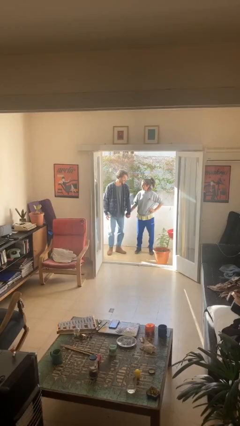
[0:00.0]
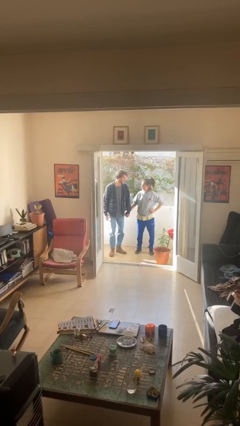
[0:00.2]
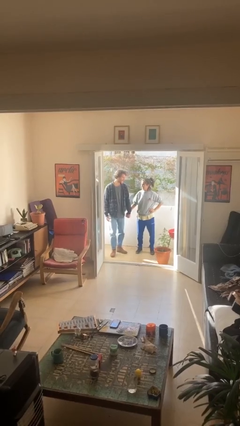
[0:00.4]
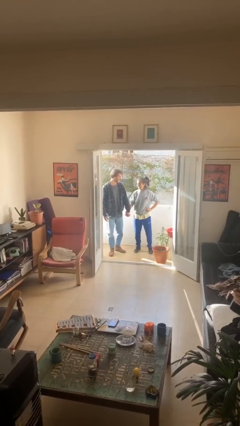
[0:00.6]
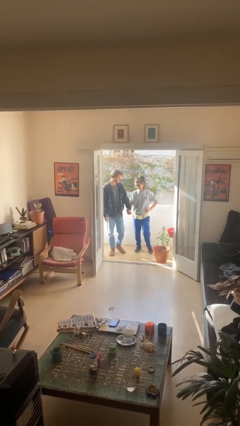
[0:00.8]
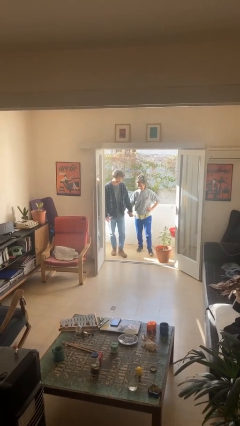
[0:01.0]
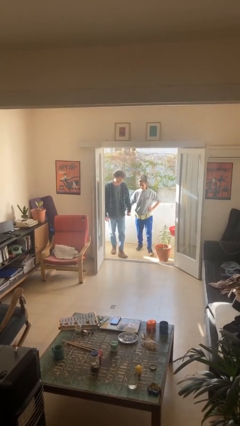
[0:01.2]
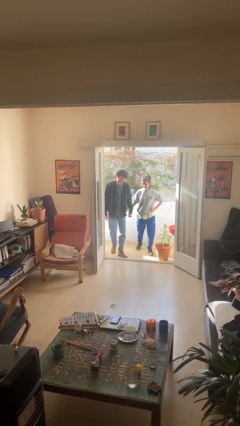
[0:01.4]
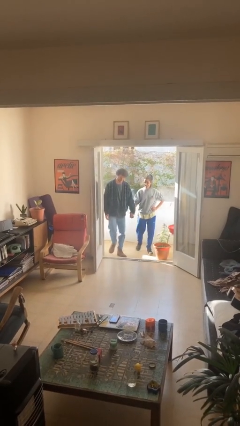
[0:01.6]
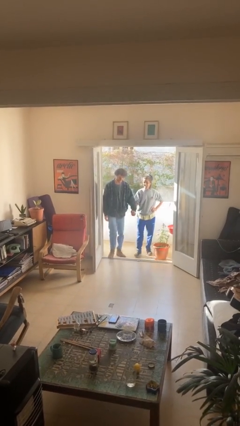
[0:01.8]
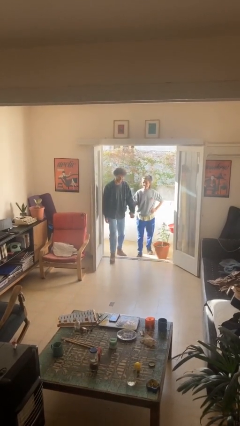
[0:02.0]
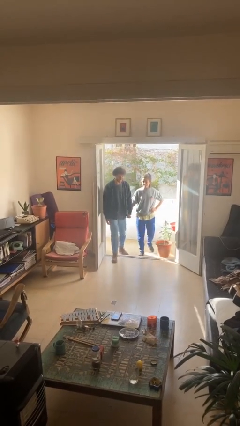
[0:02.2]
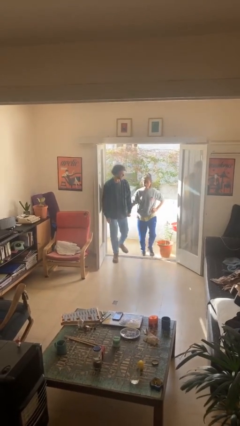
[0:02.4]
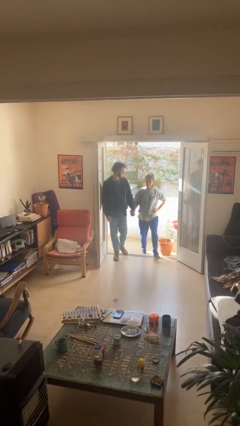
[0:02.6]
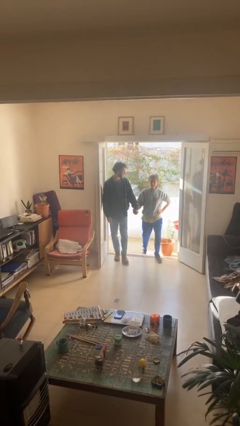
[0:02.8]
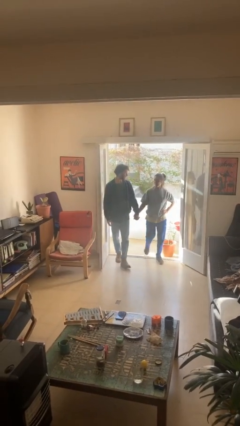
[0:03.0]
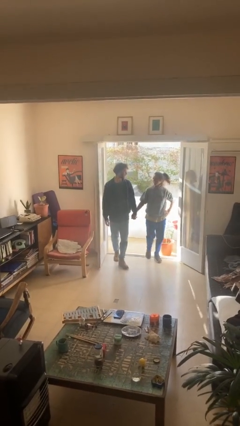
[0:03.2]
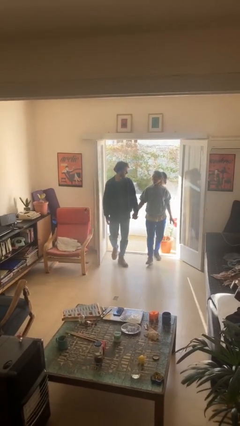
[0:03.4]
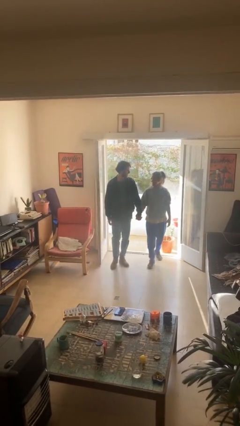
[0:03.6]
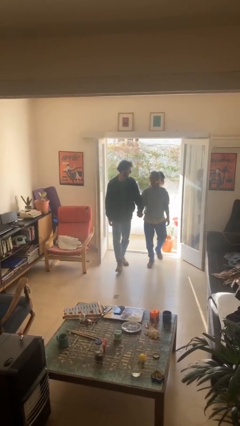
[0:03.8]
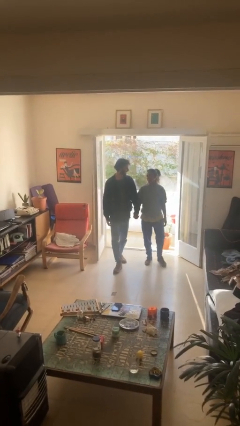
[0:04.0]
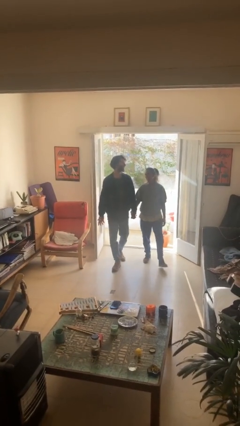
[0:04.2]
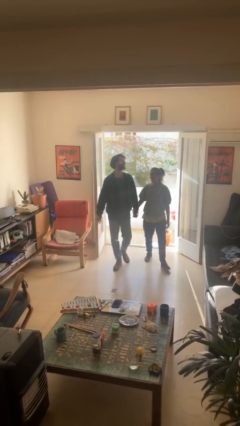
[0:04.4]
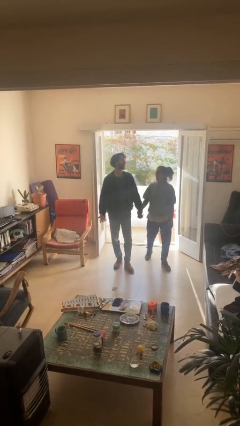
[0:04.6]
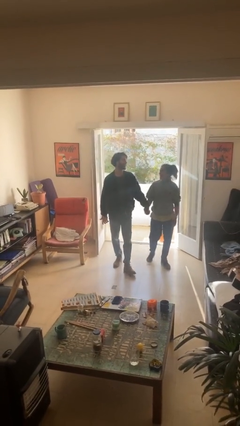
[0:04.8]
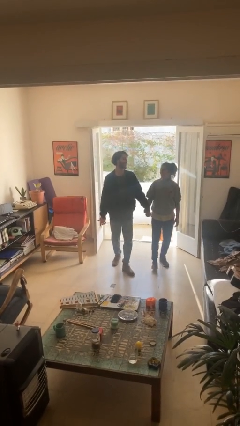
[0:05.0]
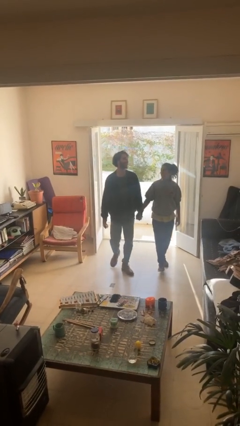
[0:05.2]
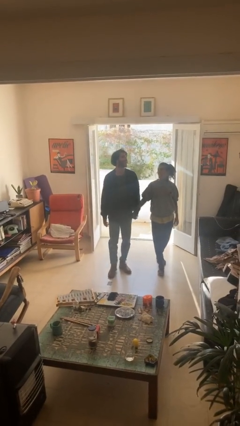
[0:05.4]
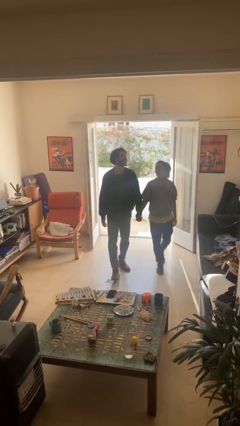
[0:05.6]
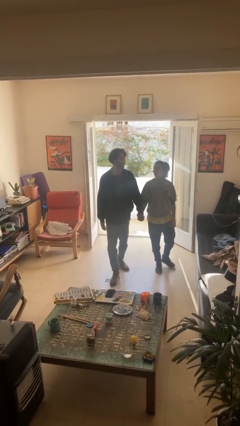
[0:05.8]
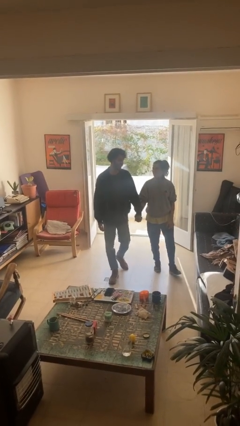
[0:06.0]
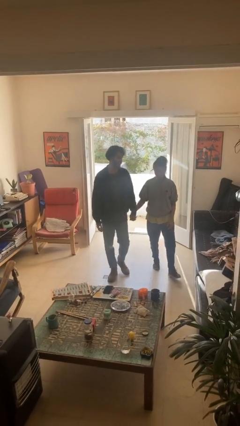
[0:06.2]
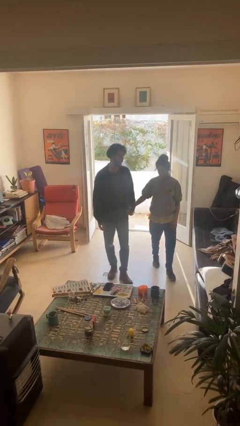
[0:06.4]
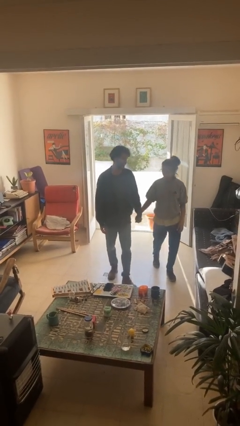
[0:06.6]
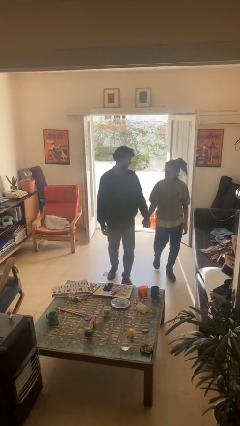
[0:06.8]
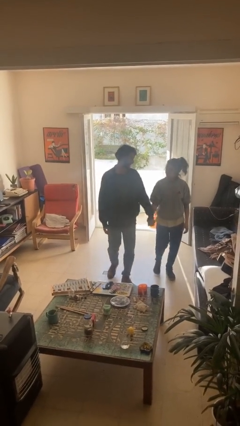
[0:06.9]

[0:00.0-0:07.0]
person holds hand

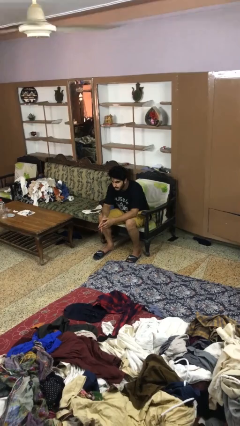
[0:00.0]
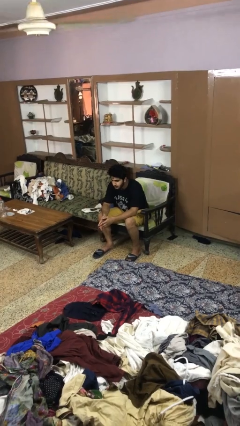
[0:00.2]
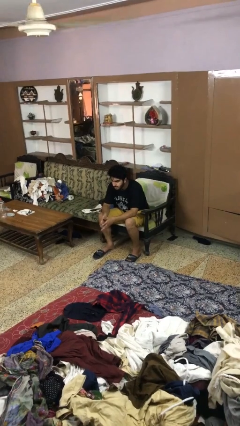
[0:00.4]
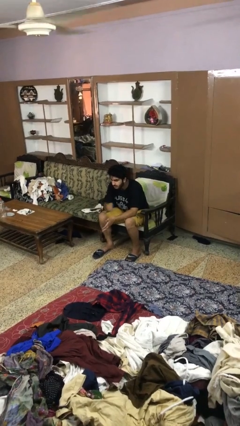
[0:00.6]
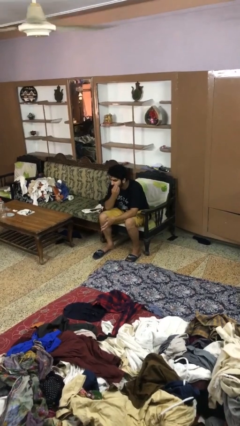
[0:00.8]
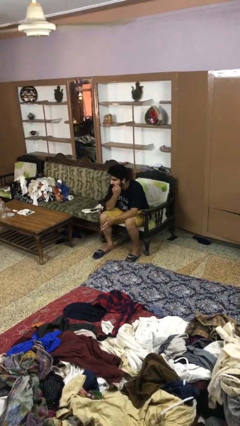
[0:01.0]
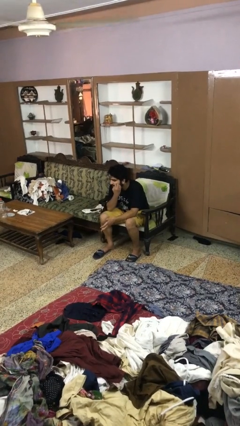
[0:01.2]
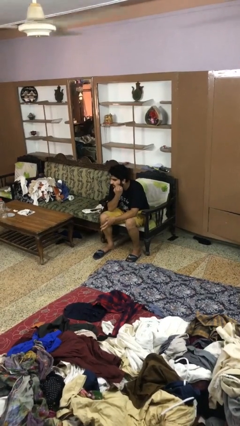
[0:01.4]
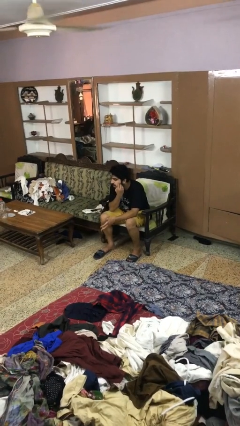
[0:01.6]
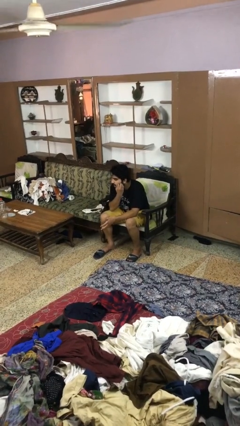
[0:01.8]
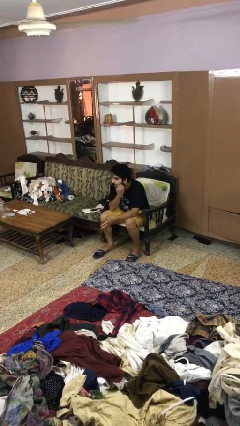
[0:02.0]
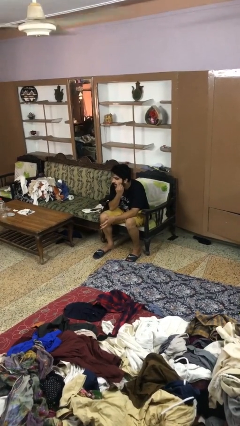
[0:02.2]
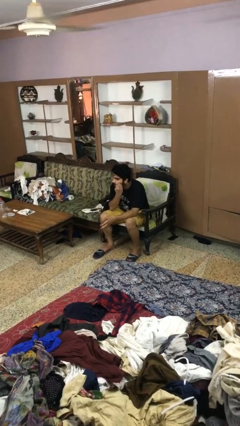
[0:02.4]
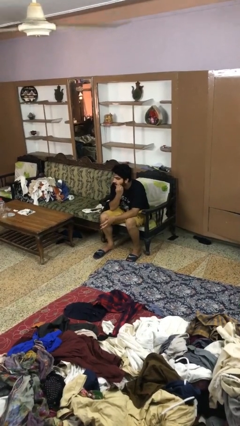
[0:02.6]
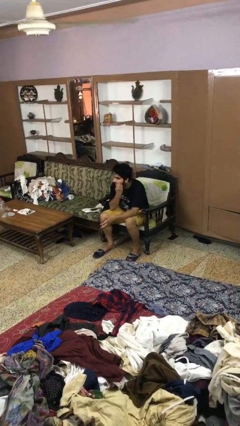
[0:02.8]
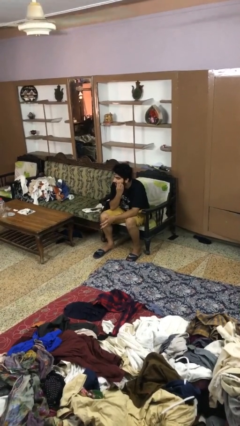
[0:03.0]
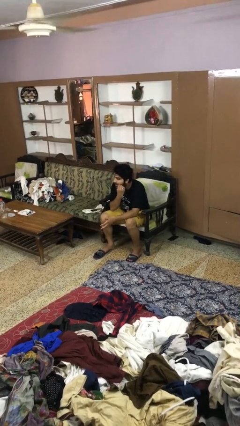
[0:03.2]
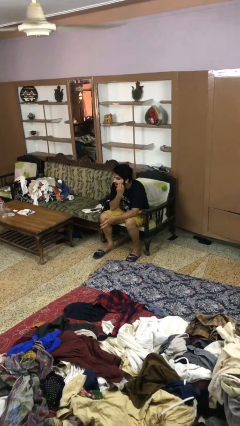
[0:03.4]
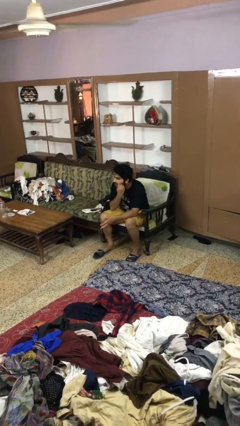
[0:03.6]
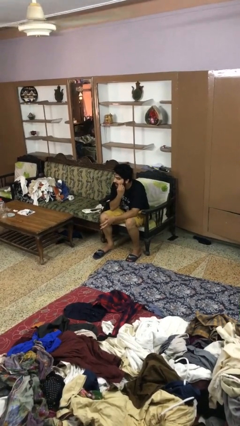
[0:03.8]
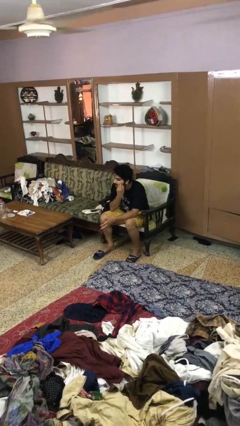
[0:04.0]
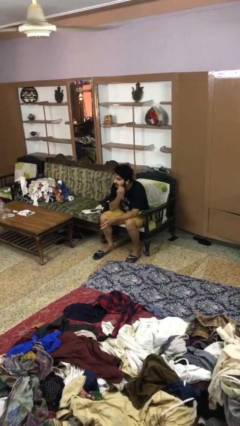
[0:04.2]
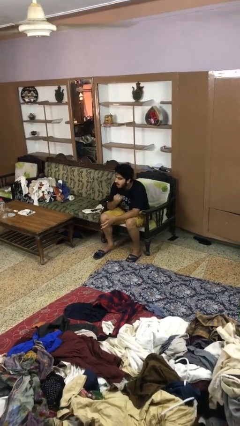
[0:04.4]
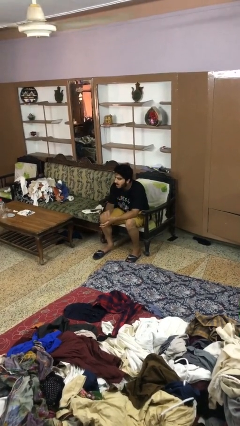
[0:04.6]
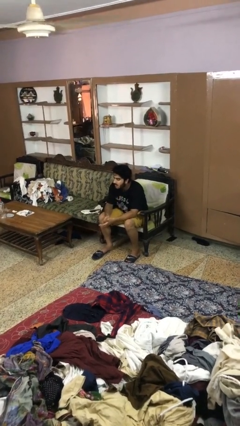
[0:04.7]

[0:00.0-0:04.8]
person scratches face

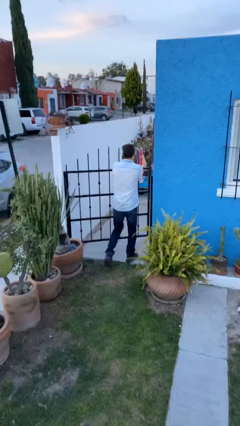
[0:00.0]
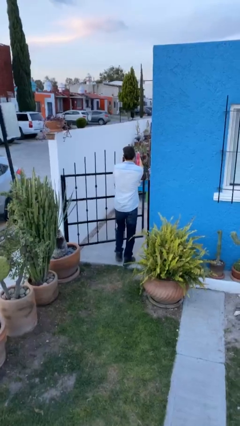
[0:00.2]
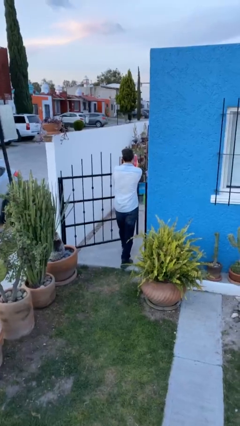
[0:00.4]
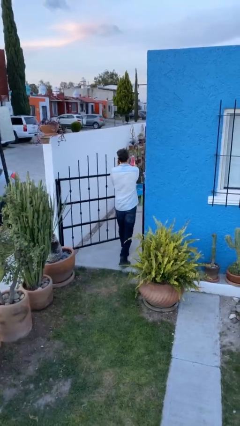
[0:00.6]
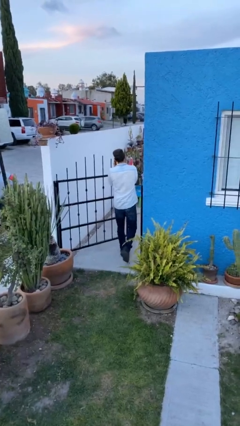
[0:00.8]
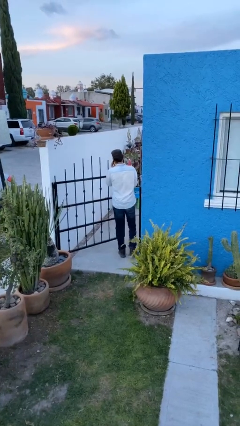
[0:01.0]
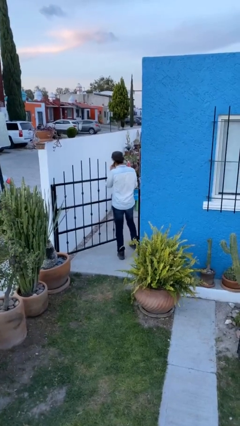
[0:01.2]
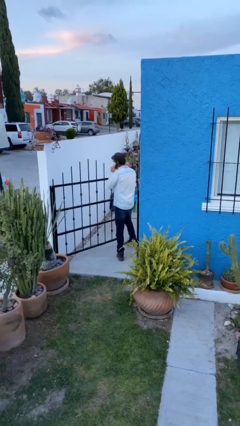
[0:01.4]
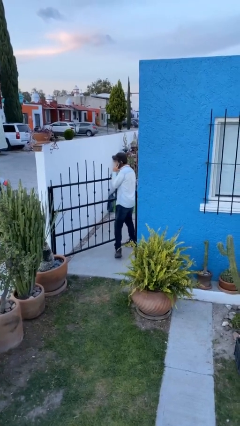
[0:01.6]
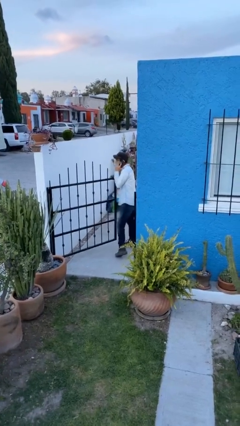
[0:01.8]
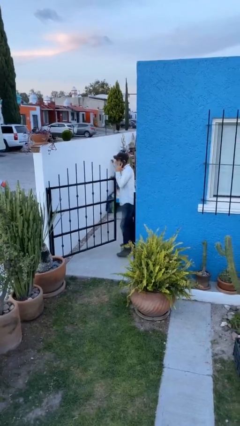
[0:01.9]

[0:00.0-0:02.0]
person exits scene through structure

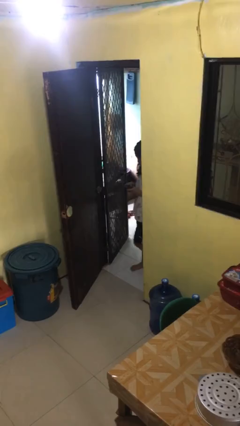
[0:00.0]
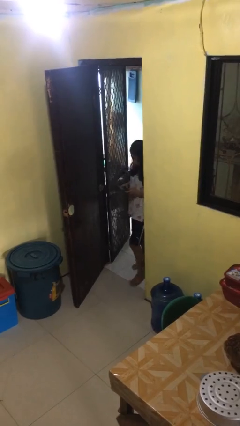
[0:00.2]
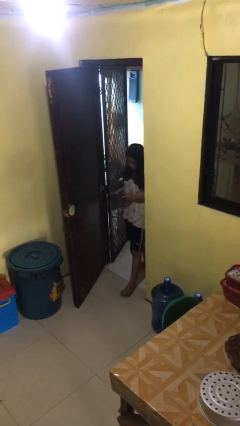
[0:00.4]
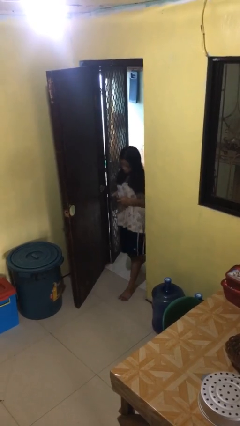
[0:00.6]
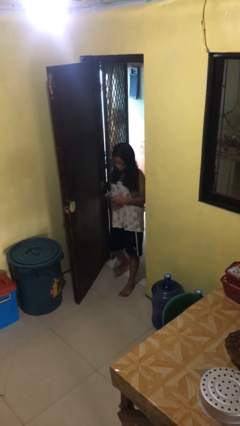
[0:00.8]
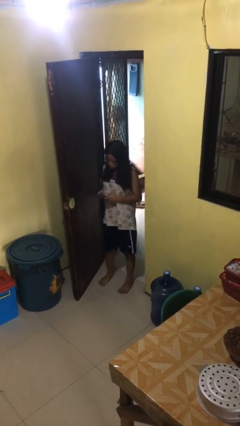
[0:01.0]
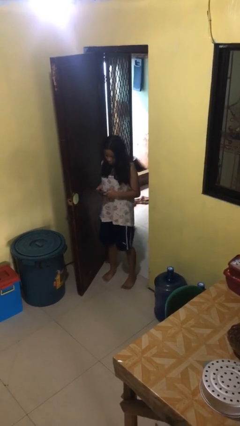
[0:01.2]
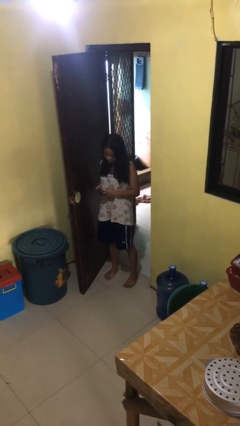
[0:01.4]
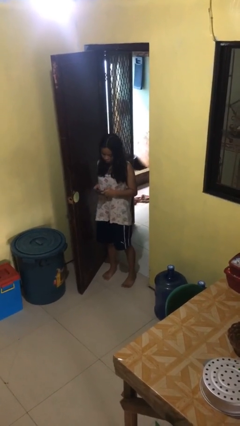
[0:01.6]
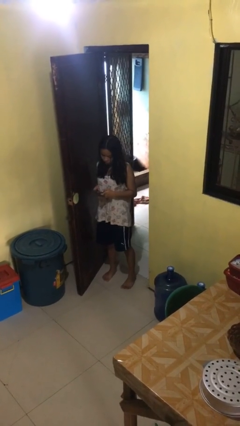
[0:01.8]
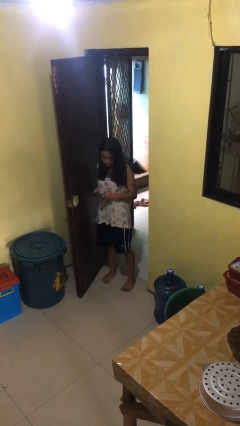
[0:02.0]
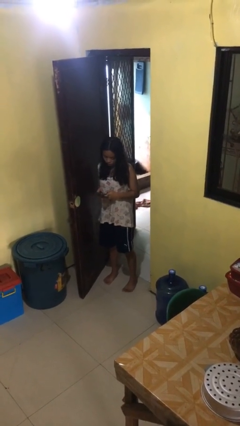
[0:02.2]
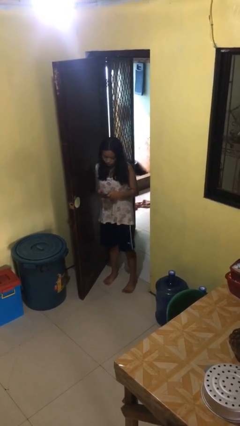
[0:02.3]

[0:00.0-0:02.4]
person enters scene through structure

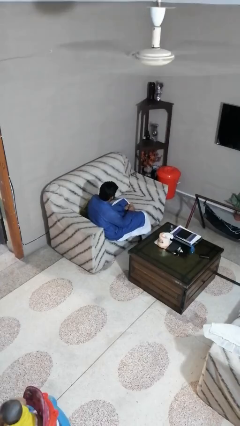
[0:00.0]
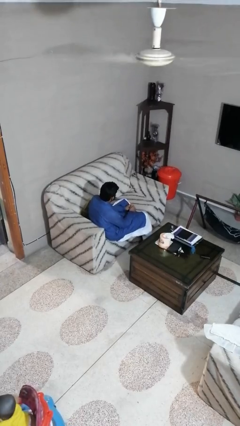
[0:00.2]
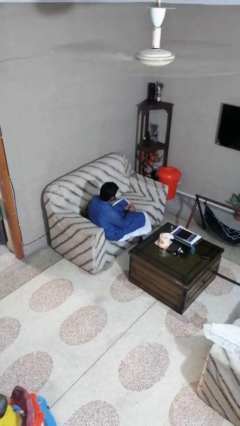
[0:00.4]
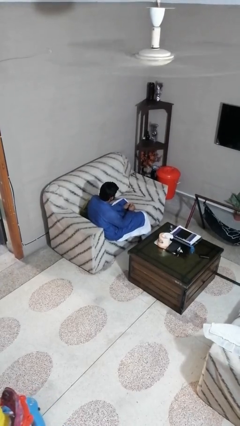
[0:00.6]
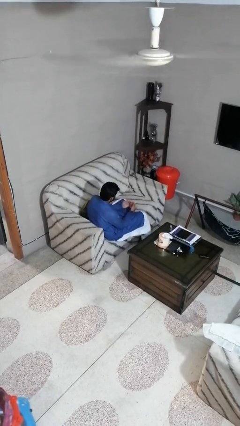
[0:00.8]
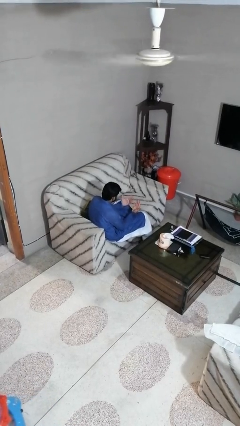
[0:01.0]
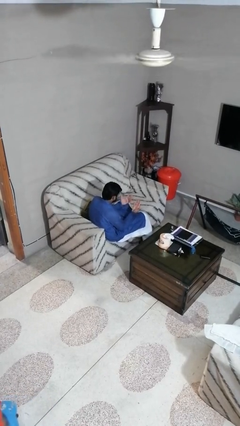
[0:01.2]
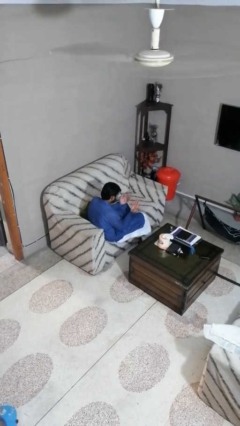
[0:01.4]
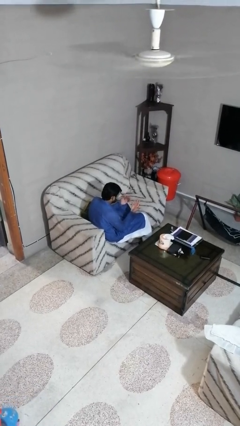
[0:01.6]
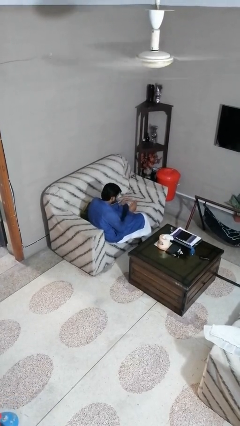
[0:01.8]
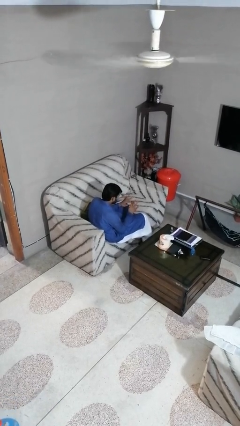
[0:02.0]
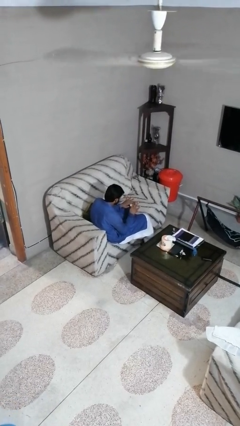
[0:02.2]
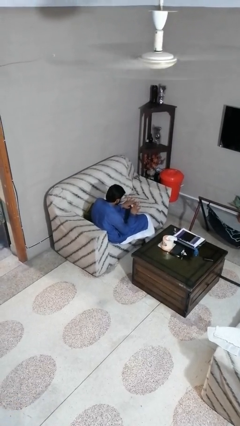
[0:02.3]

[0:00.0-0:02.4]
person looks at hands in lap
